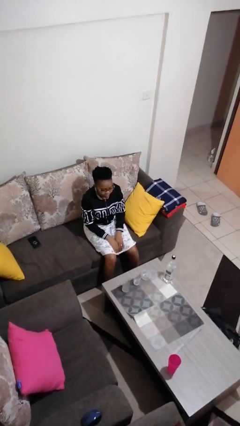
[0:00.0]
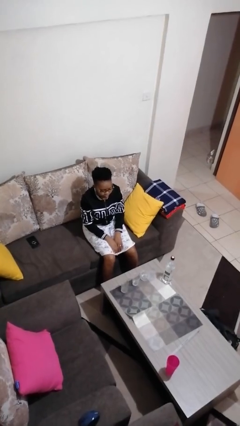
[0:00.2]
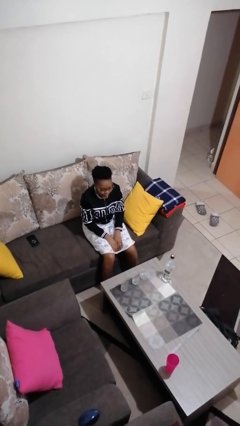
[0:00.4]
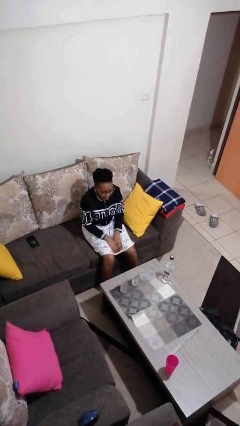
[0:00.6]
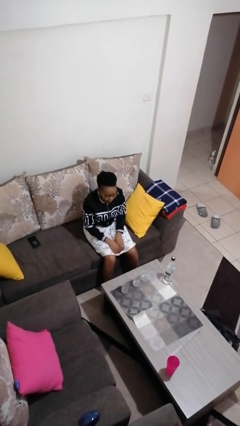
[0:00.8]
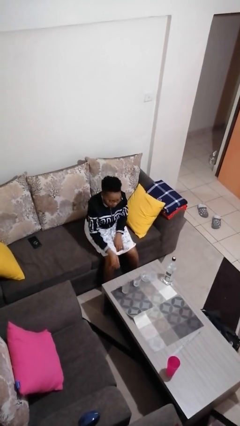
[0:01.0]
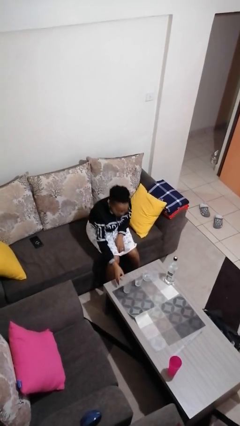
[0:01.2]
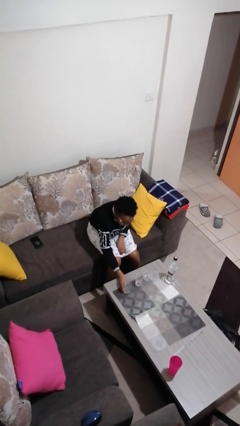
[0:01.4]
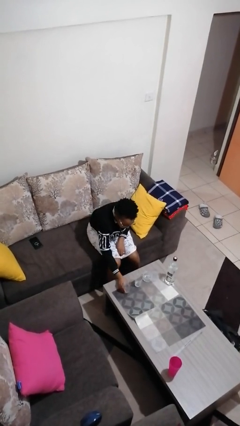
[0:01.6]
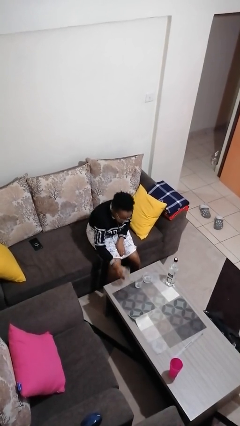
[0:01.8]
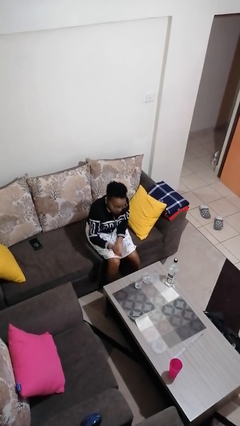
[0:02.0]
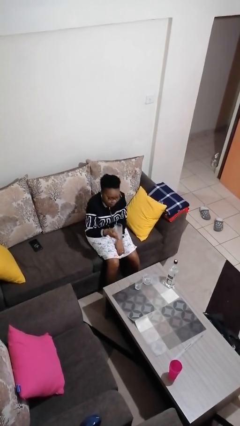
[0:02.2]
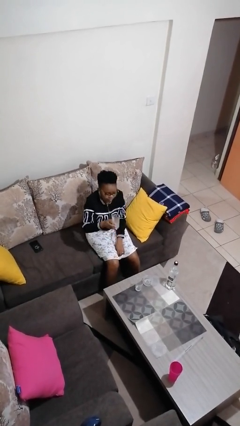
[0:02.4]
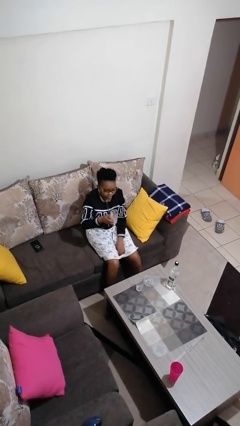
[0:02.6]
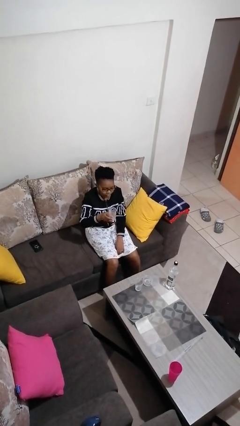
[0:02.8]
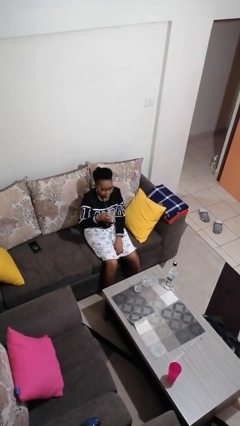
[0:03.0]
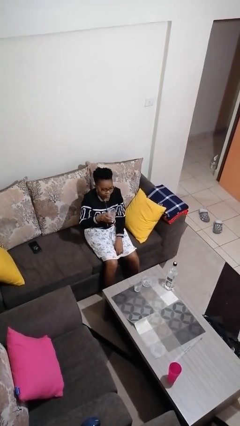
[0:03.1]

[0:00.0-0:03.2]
person picks up object from table

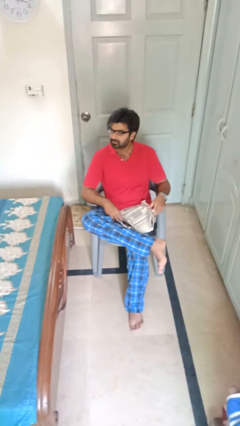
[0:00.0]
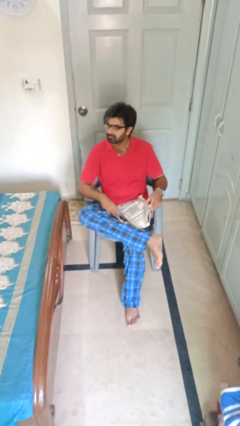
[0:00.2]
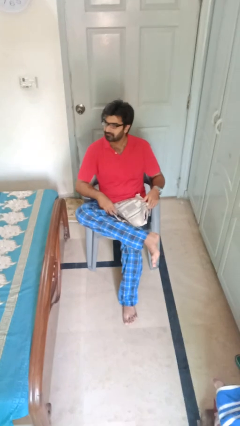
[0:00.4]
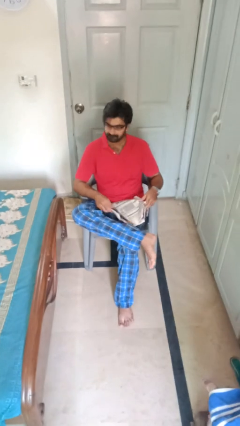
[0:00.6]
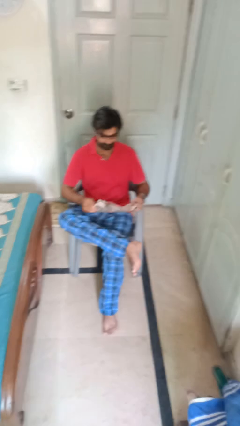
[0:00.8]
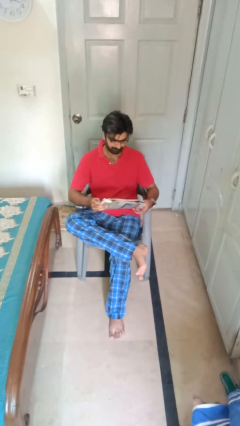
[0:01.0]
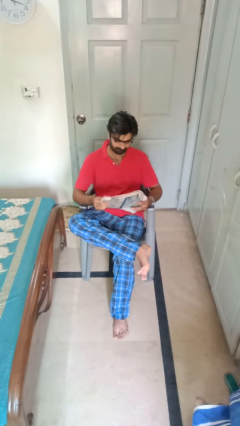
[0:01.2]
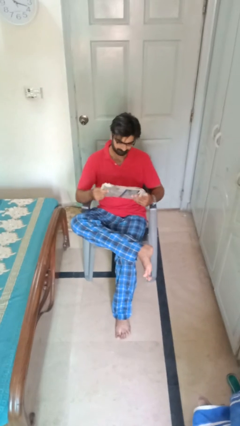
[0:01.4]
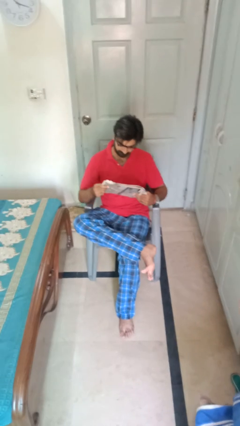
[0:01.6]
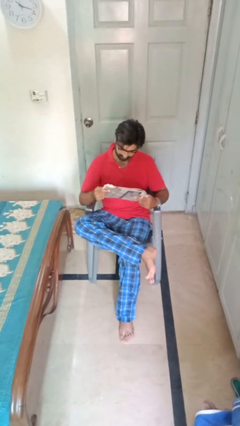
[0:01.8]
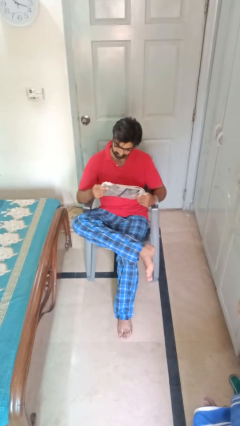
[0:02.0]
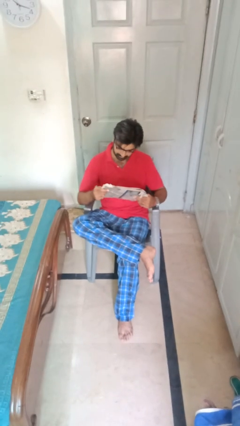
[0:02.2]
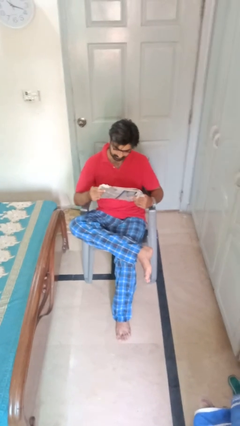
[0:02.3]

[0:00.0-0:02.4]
person reads newspaper

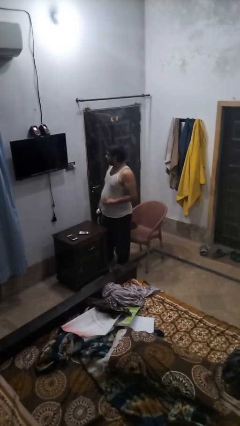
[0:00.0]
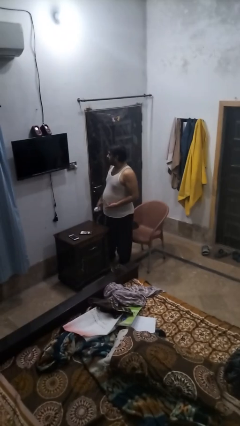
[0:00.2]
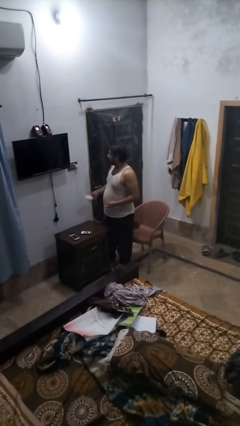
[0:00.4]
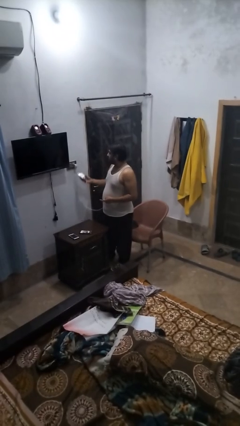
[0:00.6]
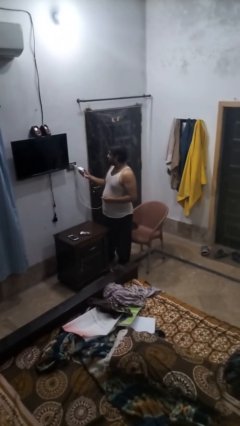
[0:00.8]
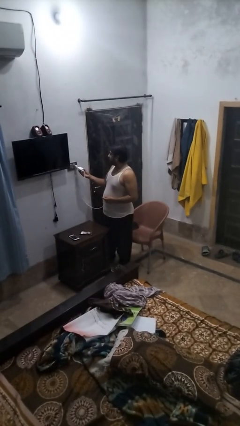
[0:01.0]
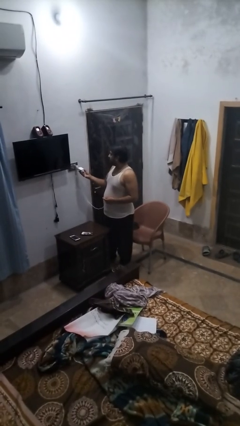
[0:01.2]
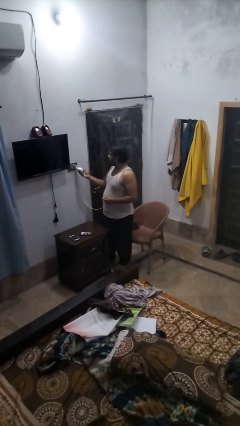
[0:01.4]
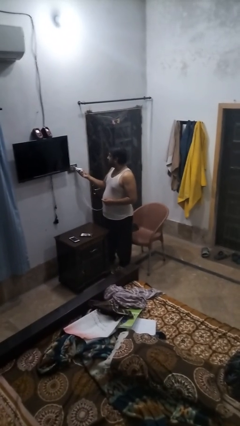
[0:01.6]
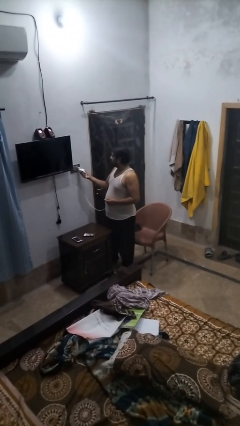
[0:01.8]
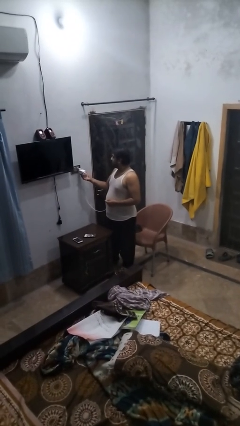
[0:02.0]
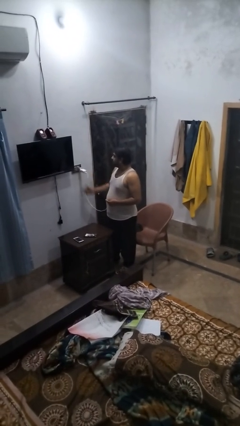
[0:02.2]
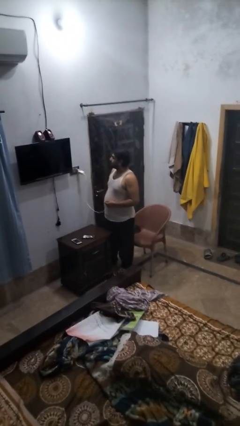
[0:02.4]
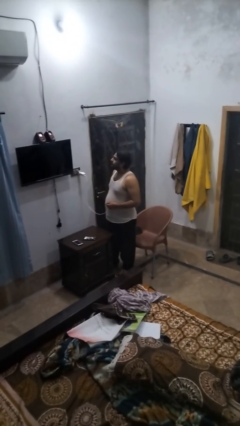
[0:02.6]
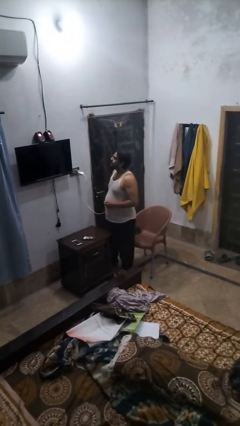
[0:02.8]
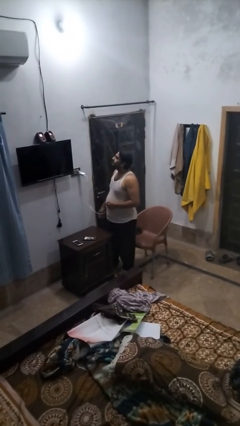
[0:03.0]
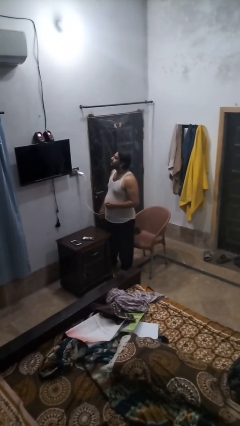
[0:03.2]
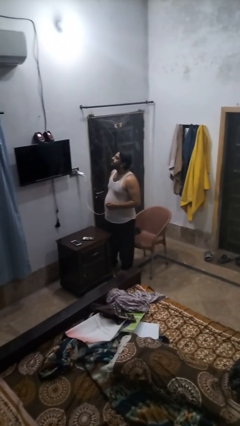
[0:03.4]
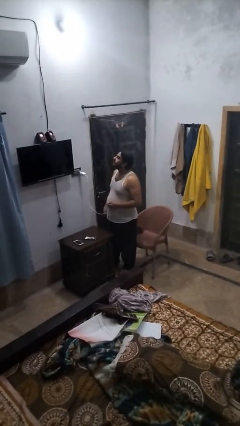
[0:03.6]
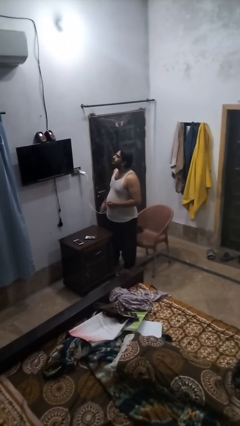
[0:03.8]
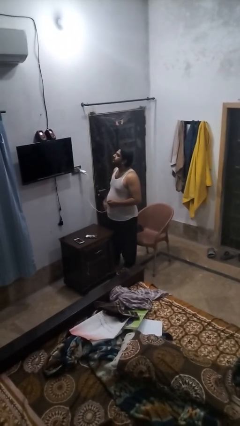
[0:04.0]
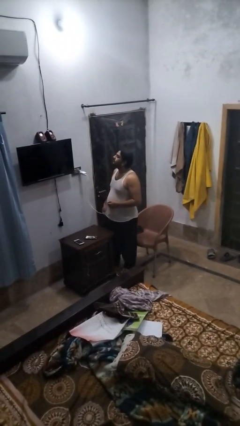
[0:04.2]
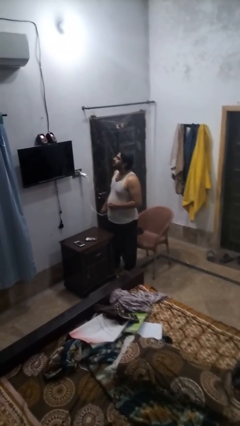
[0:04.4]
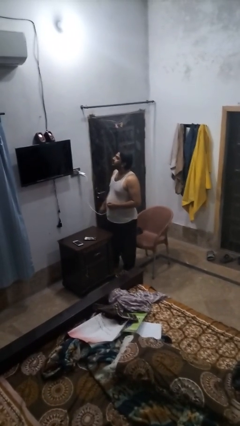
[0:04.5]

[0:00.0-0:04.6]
person plugs into electrical socket

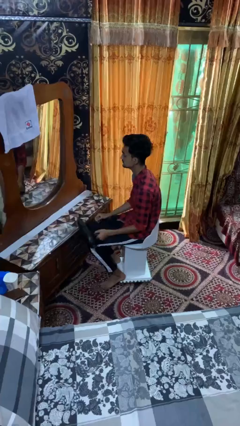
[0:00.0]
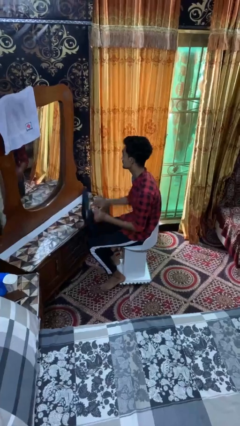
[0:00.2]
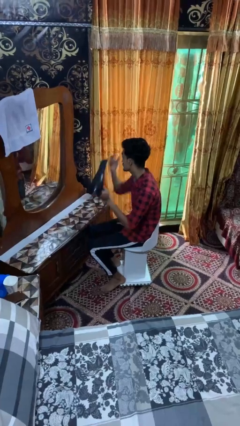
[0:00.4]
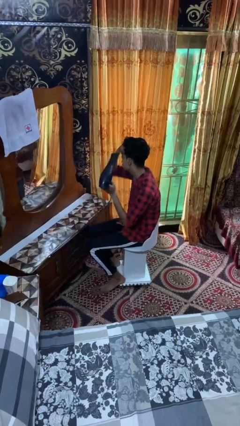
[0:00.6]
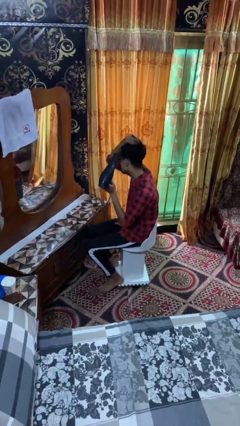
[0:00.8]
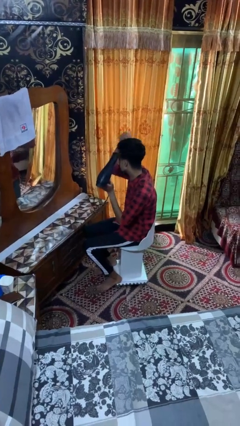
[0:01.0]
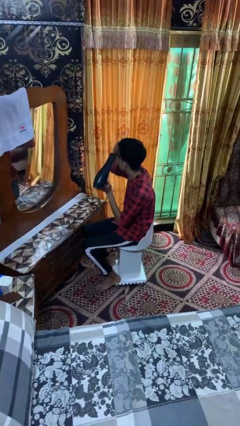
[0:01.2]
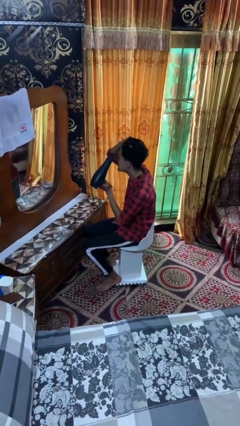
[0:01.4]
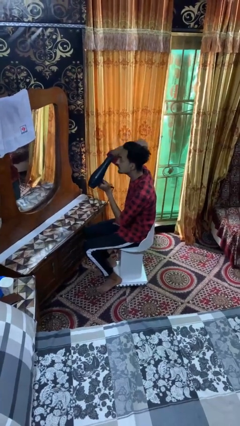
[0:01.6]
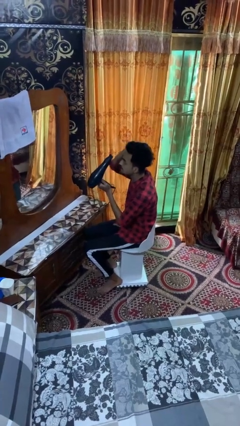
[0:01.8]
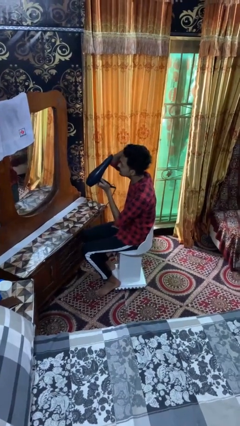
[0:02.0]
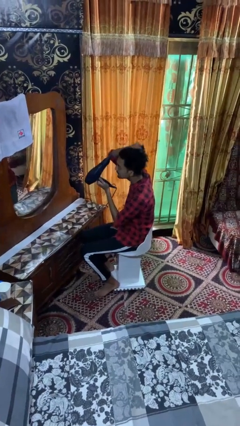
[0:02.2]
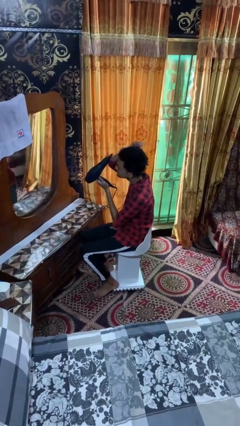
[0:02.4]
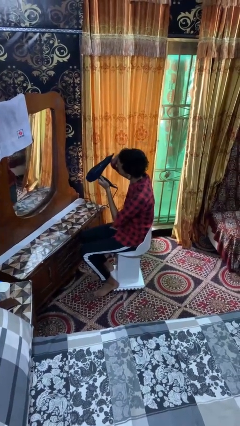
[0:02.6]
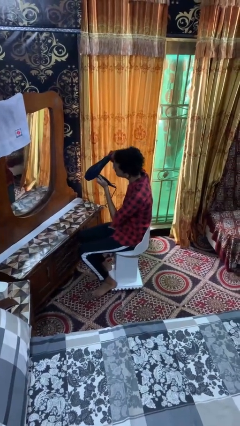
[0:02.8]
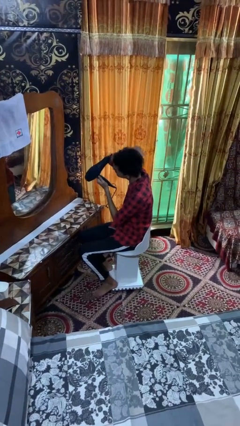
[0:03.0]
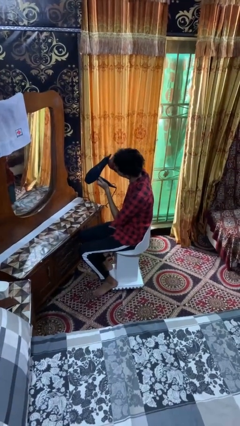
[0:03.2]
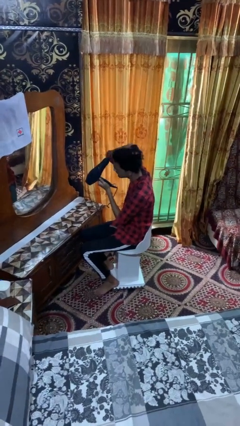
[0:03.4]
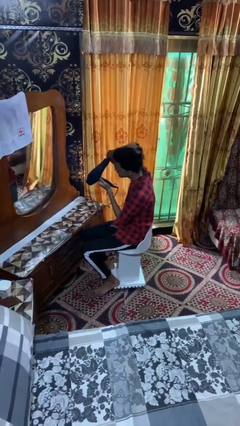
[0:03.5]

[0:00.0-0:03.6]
person dries hair with hairdryer

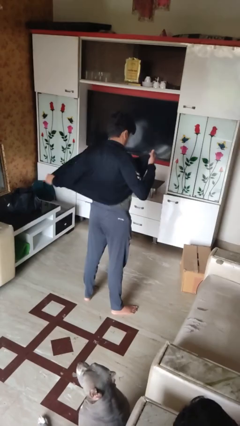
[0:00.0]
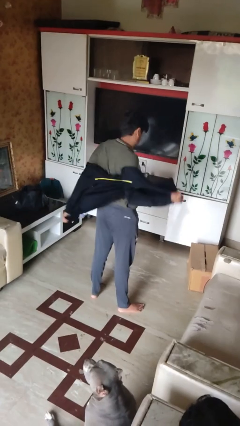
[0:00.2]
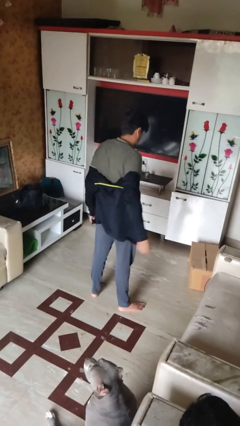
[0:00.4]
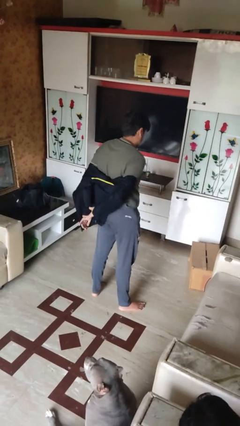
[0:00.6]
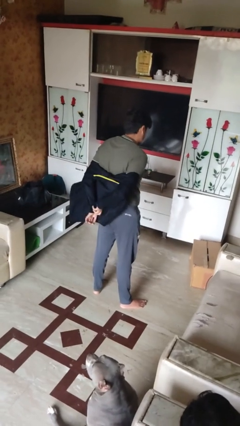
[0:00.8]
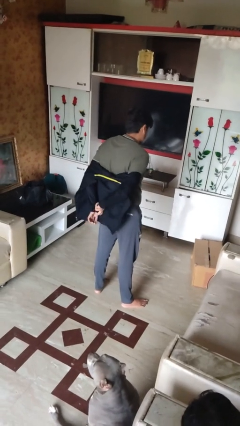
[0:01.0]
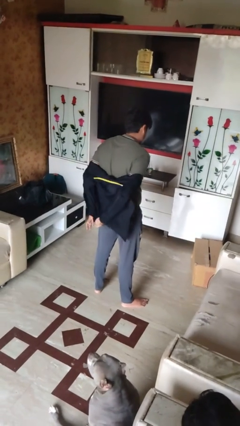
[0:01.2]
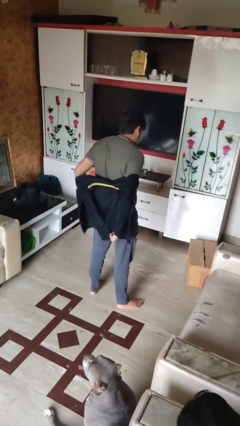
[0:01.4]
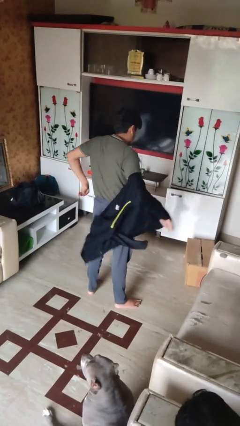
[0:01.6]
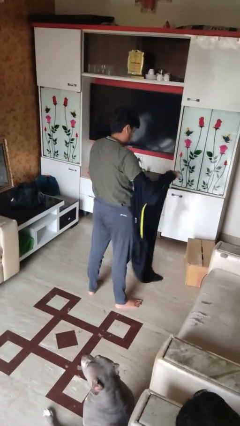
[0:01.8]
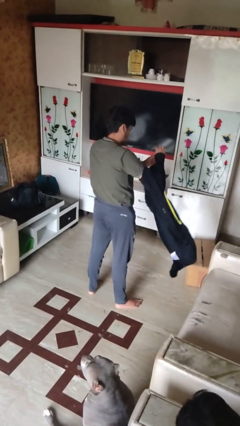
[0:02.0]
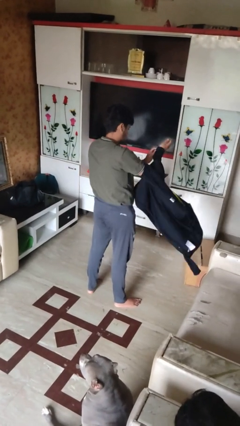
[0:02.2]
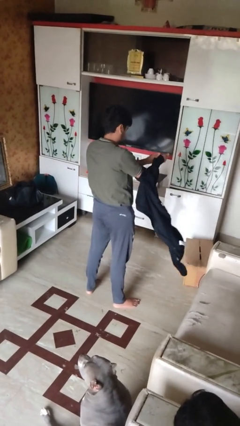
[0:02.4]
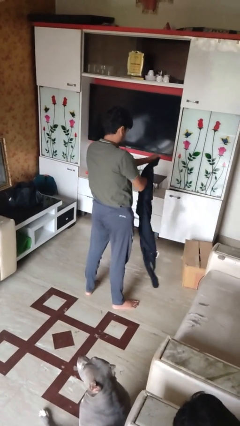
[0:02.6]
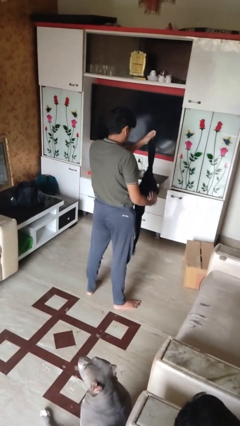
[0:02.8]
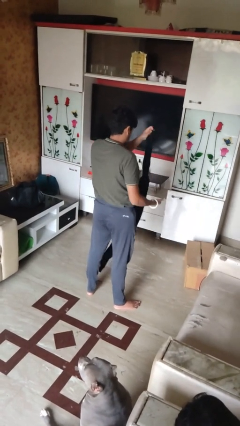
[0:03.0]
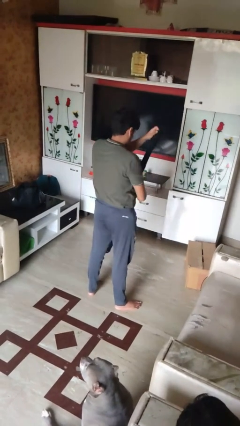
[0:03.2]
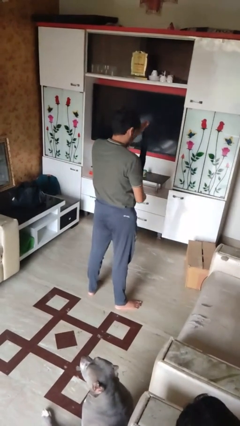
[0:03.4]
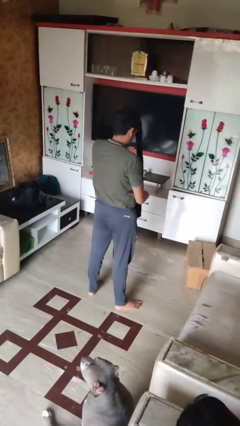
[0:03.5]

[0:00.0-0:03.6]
person takes off jacket

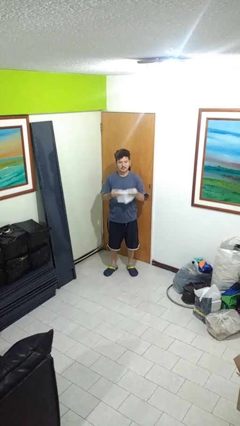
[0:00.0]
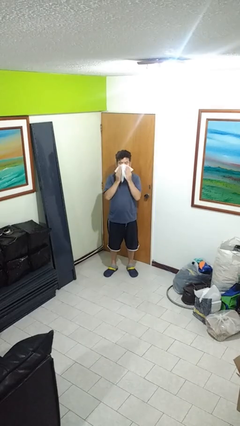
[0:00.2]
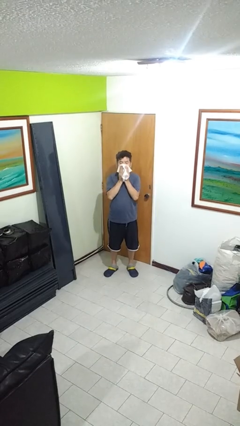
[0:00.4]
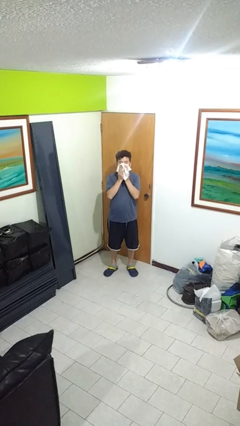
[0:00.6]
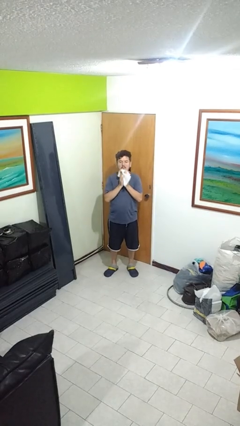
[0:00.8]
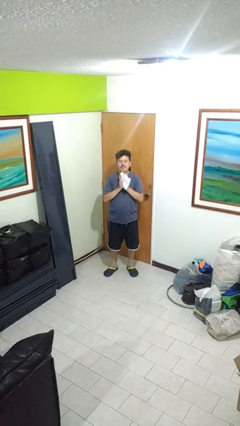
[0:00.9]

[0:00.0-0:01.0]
person wipes mouth with napkin
